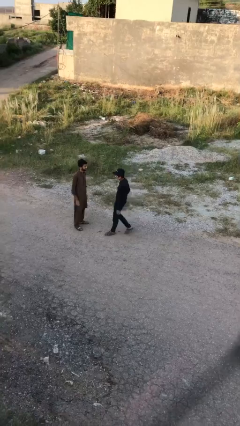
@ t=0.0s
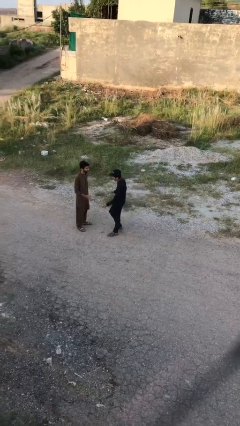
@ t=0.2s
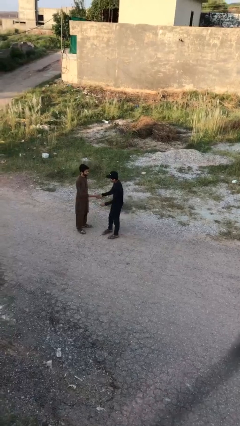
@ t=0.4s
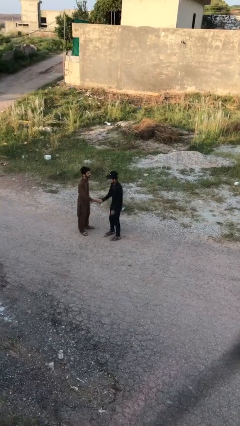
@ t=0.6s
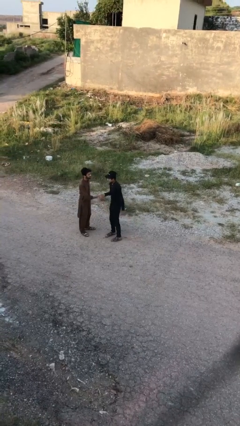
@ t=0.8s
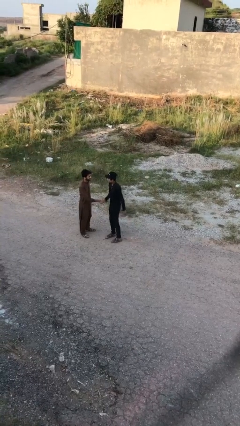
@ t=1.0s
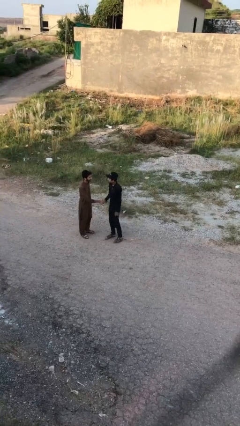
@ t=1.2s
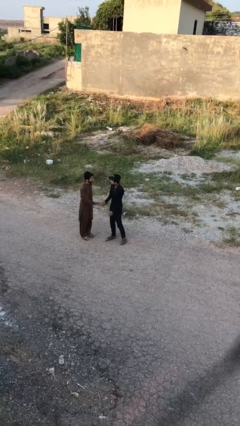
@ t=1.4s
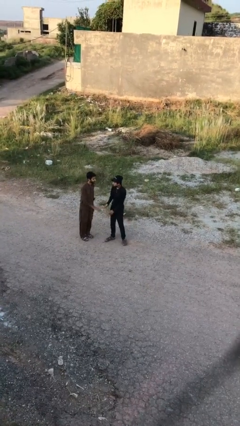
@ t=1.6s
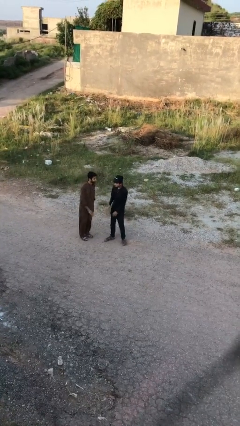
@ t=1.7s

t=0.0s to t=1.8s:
person shakes hand

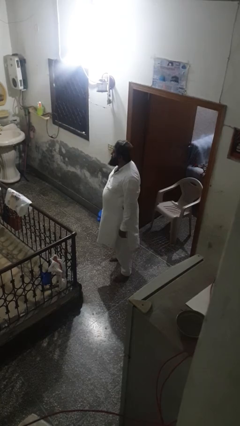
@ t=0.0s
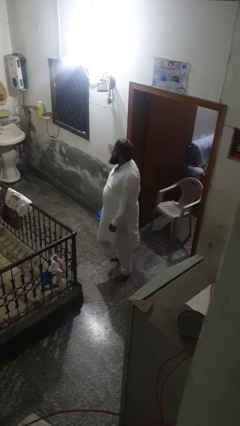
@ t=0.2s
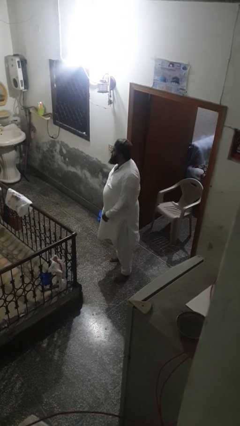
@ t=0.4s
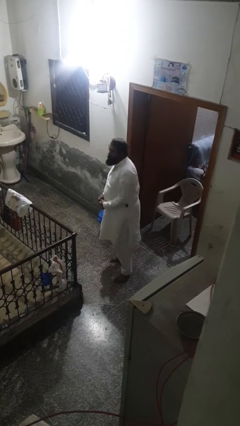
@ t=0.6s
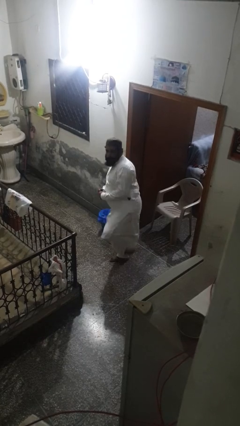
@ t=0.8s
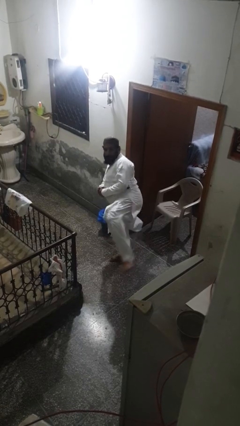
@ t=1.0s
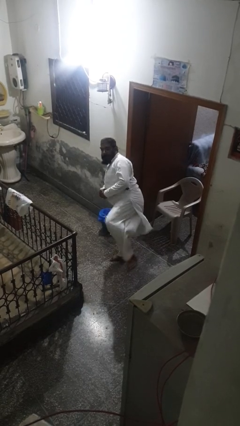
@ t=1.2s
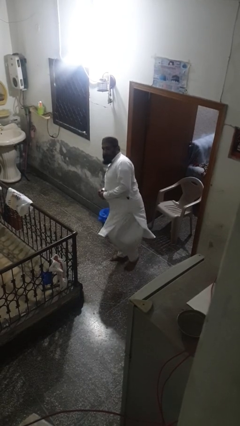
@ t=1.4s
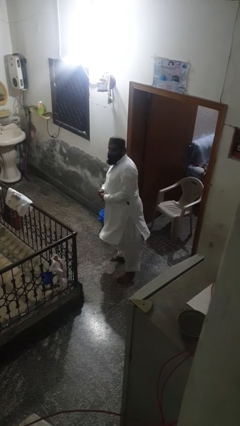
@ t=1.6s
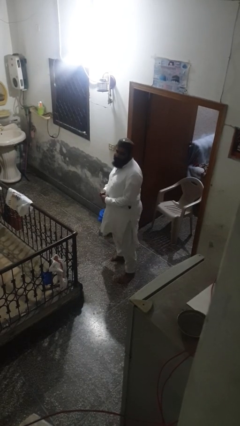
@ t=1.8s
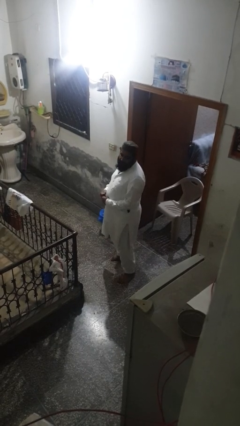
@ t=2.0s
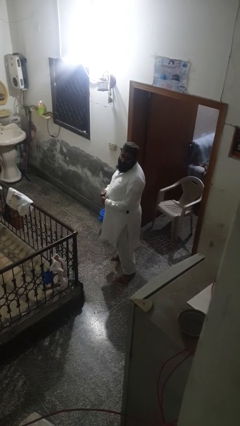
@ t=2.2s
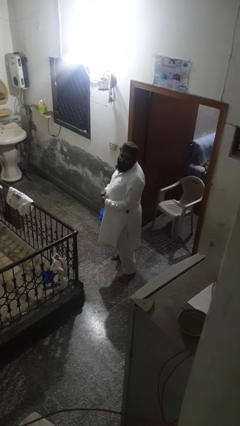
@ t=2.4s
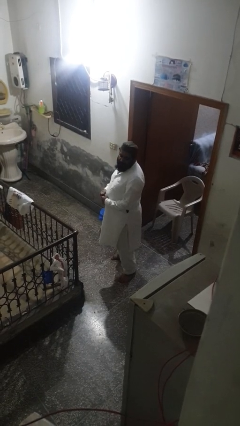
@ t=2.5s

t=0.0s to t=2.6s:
person karate kicks

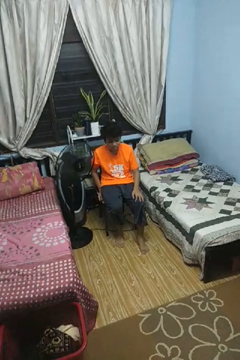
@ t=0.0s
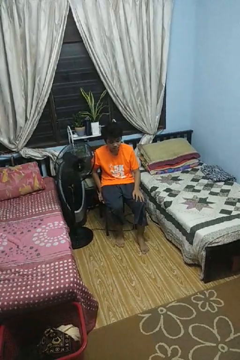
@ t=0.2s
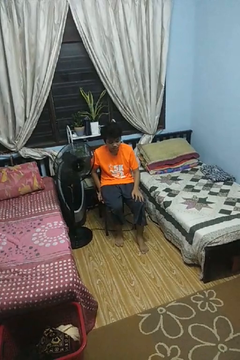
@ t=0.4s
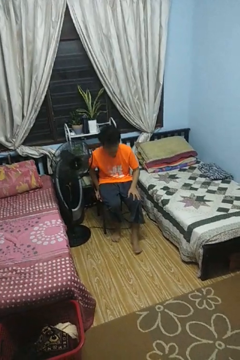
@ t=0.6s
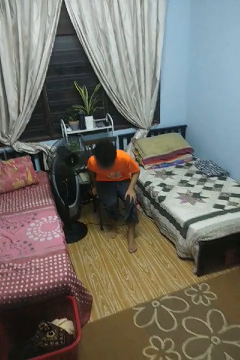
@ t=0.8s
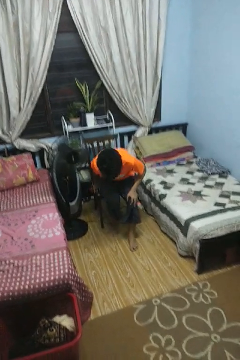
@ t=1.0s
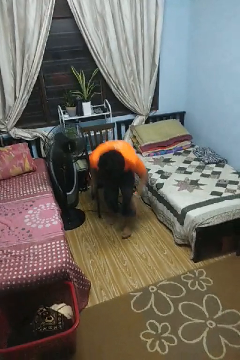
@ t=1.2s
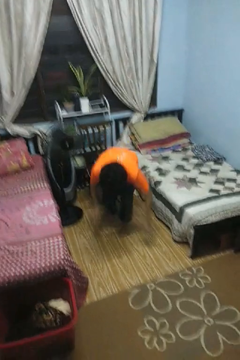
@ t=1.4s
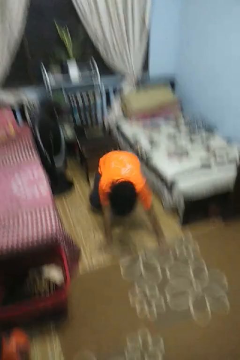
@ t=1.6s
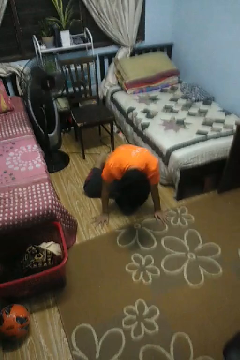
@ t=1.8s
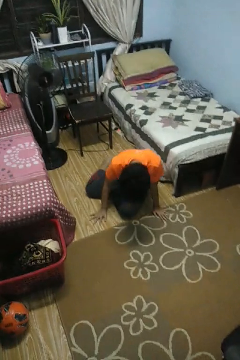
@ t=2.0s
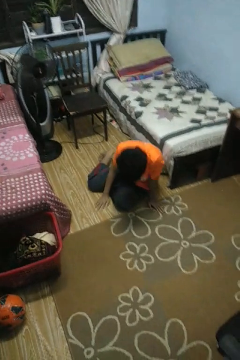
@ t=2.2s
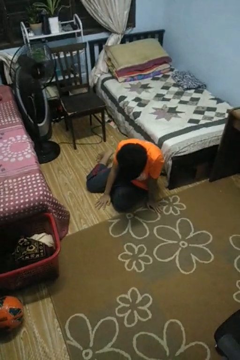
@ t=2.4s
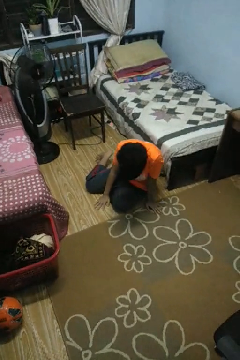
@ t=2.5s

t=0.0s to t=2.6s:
person falls from chair

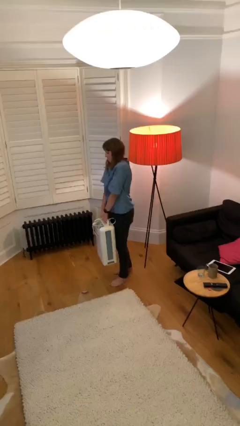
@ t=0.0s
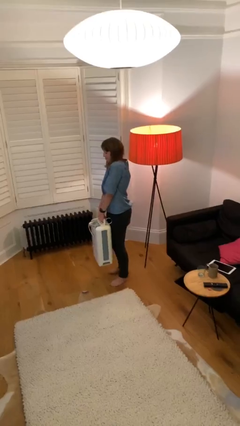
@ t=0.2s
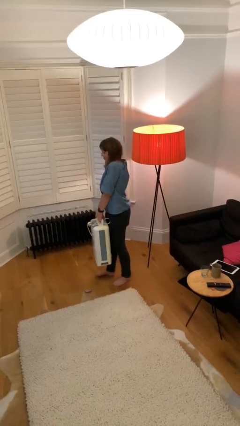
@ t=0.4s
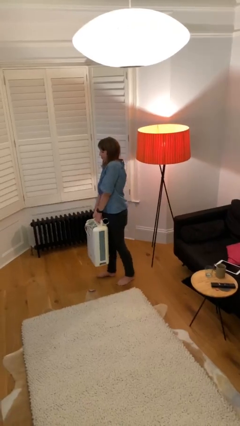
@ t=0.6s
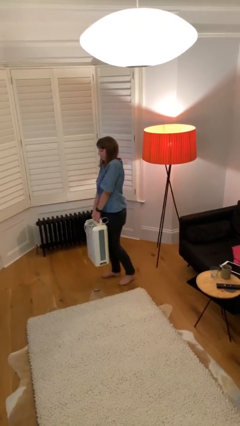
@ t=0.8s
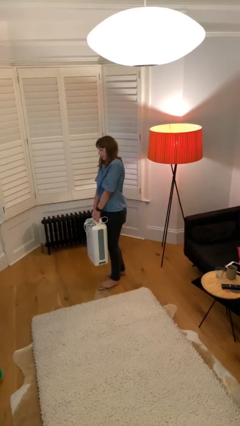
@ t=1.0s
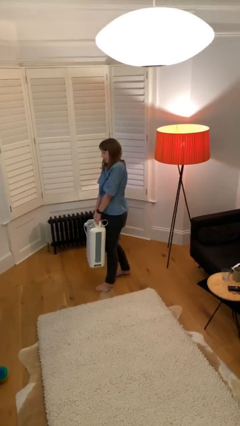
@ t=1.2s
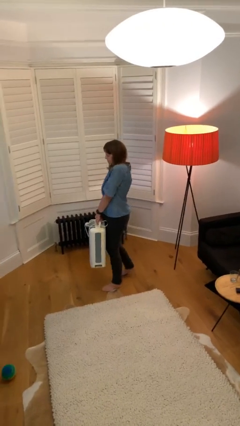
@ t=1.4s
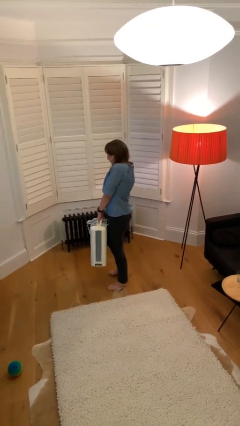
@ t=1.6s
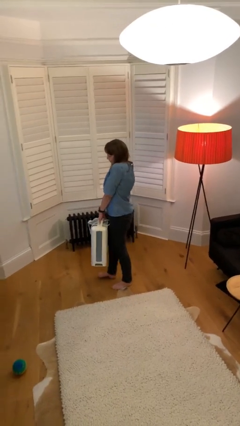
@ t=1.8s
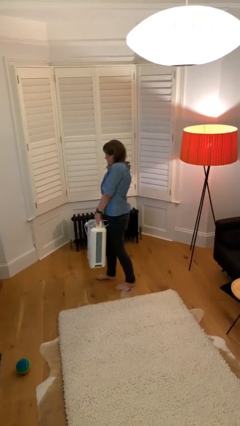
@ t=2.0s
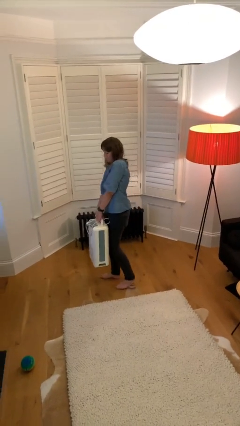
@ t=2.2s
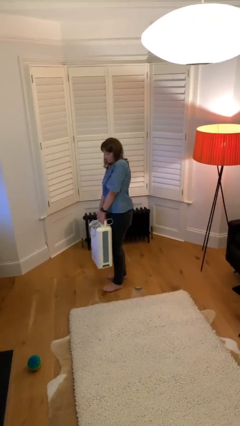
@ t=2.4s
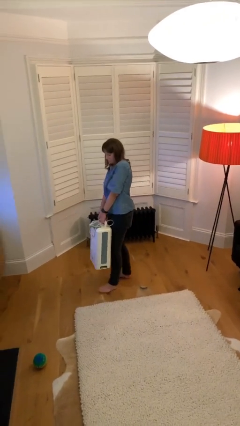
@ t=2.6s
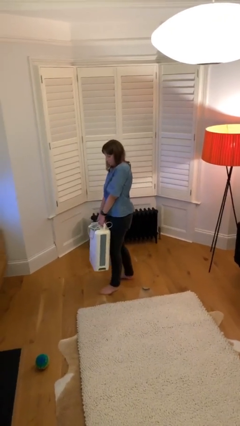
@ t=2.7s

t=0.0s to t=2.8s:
person carries heavy object

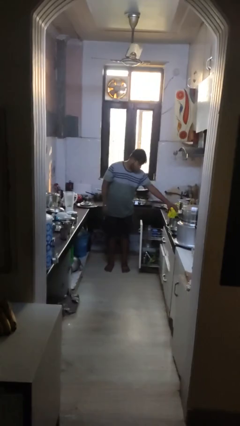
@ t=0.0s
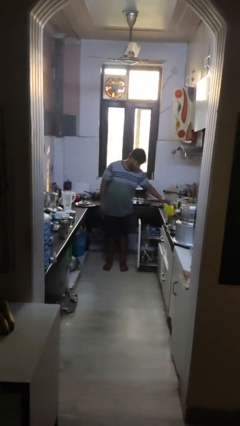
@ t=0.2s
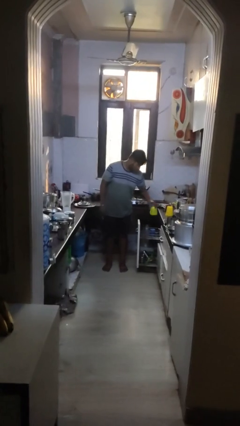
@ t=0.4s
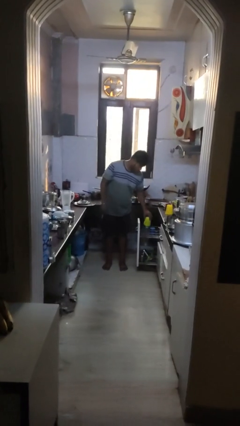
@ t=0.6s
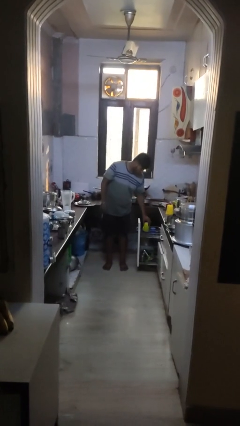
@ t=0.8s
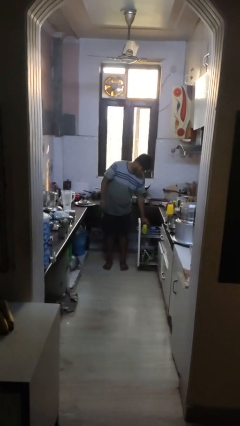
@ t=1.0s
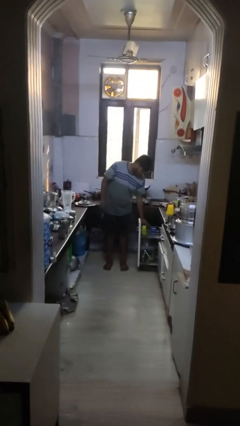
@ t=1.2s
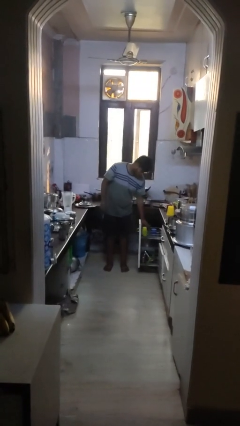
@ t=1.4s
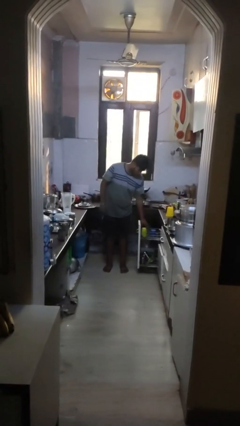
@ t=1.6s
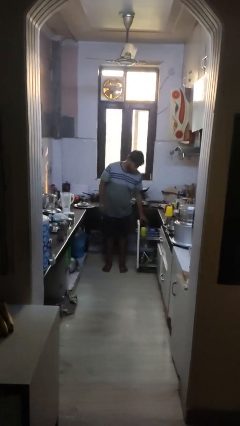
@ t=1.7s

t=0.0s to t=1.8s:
person loads dishwasher

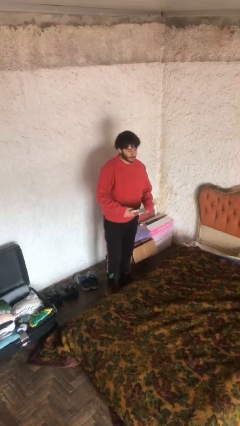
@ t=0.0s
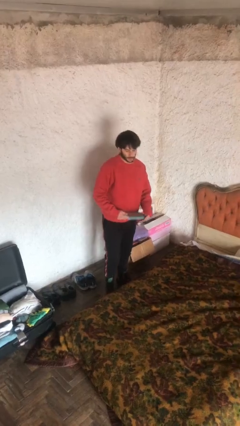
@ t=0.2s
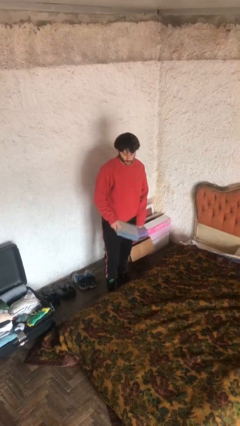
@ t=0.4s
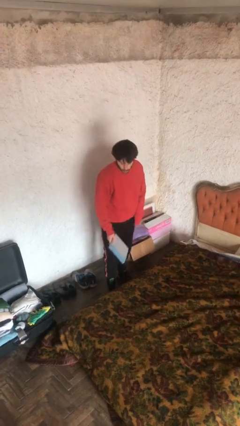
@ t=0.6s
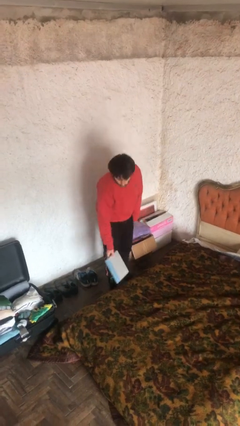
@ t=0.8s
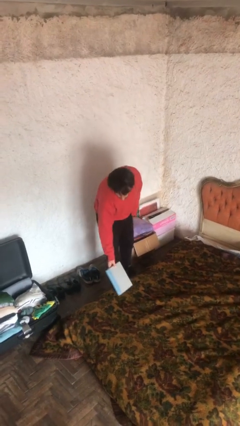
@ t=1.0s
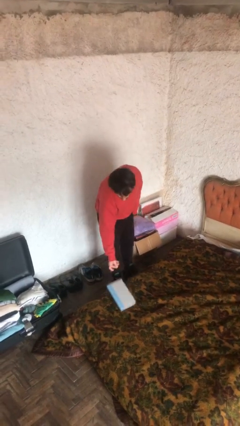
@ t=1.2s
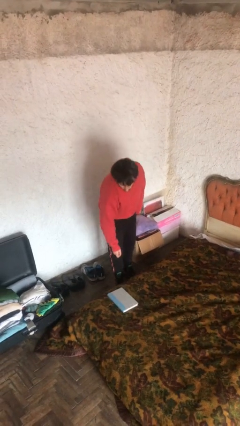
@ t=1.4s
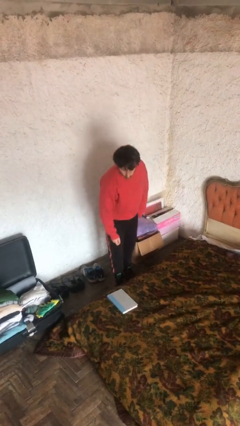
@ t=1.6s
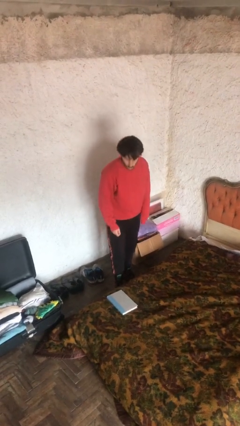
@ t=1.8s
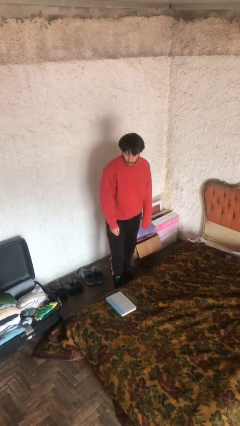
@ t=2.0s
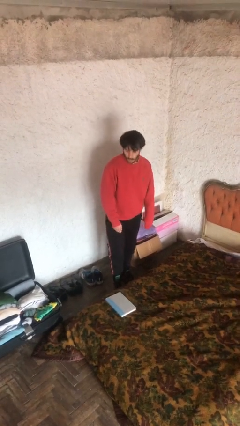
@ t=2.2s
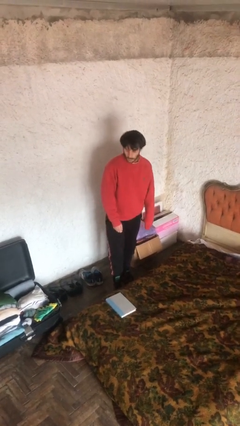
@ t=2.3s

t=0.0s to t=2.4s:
person puts down object on bed

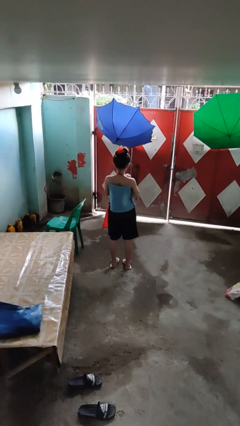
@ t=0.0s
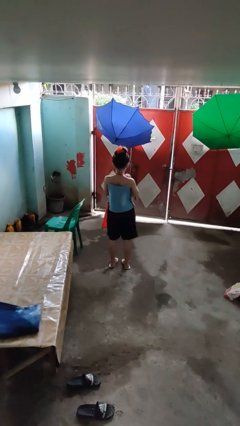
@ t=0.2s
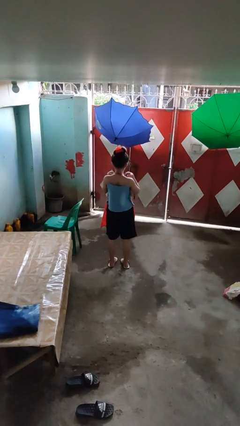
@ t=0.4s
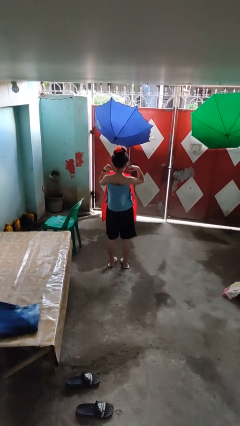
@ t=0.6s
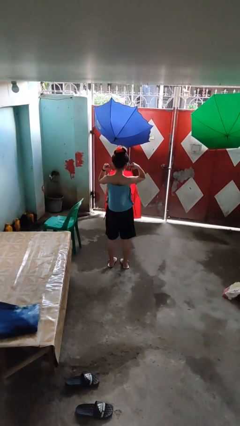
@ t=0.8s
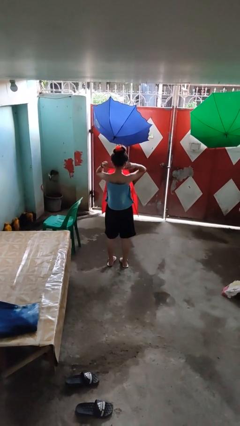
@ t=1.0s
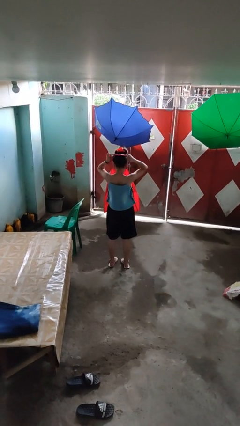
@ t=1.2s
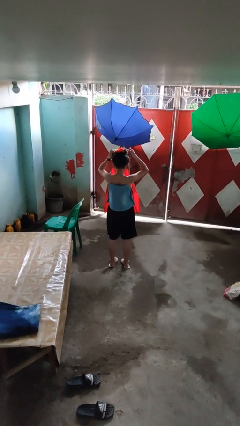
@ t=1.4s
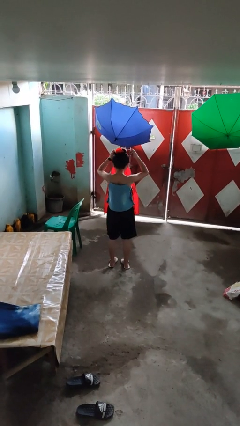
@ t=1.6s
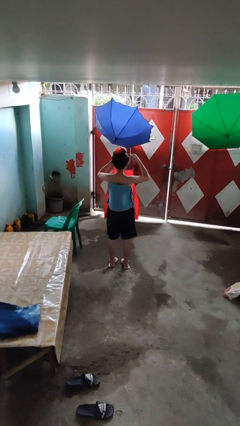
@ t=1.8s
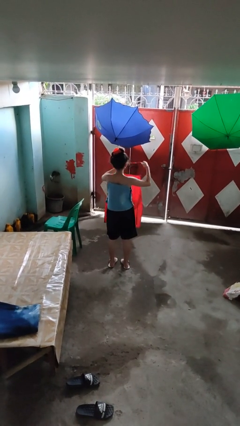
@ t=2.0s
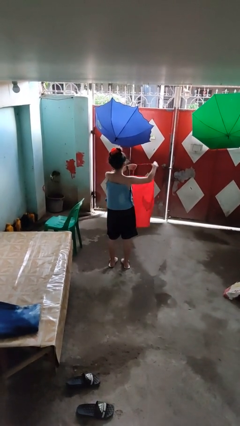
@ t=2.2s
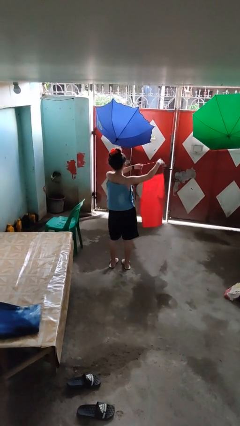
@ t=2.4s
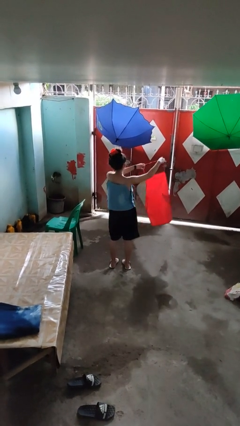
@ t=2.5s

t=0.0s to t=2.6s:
person takes off apron

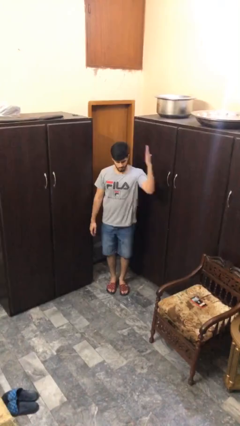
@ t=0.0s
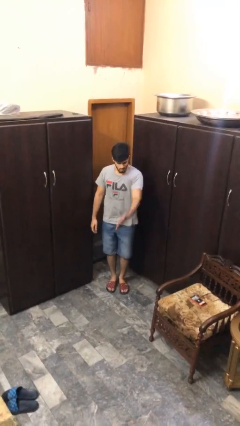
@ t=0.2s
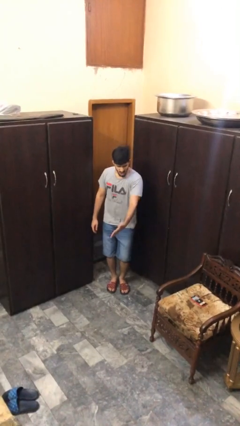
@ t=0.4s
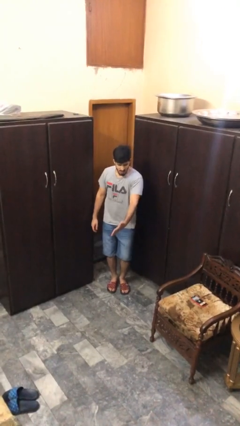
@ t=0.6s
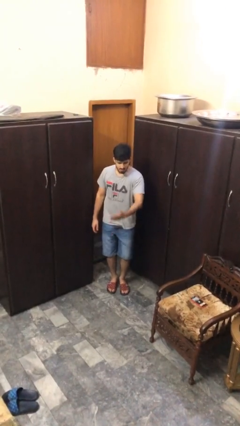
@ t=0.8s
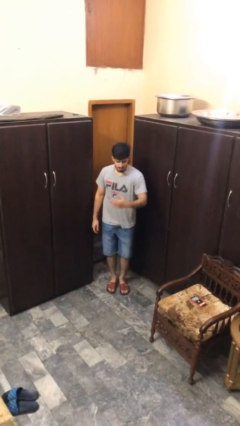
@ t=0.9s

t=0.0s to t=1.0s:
person karate chop
